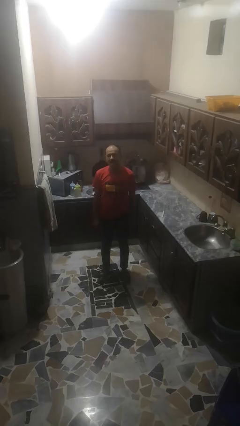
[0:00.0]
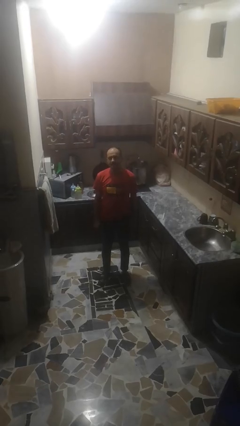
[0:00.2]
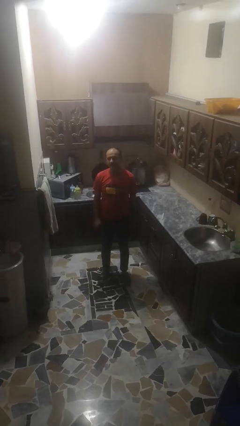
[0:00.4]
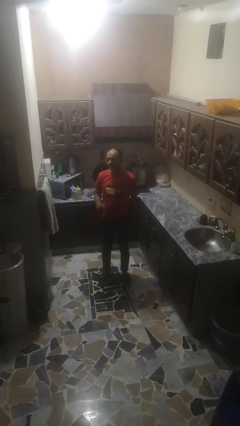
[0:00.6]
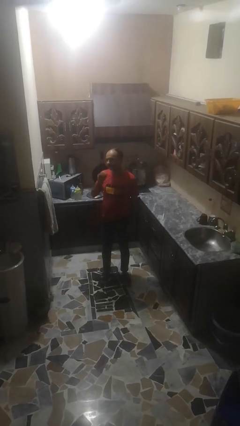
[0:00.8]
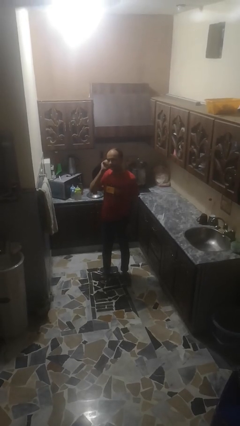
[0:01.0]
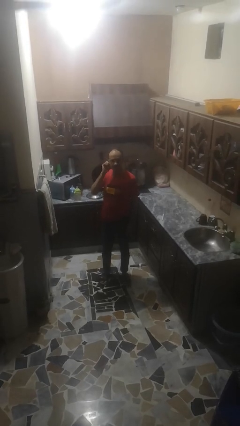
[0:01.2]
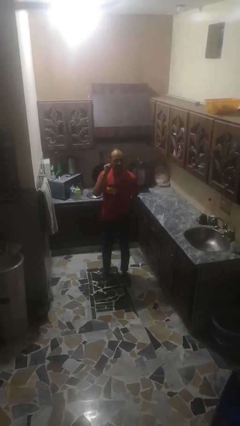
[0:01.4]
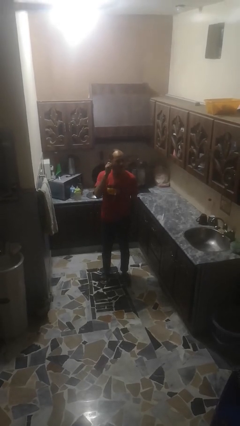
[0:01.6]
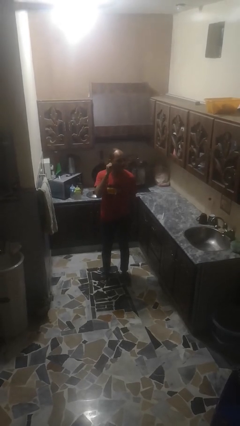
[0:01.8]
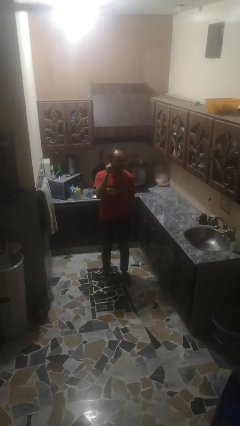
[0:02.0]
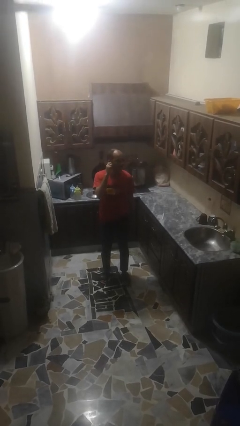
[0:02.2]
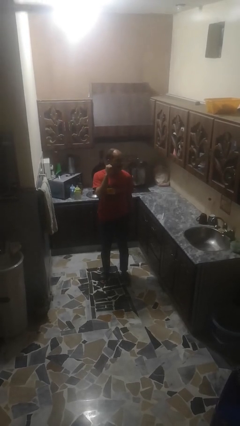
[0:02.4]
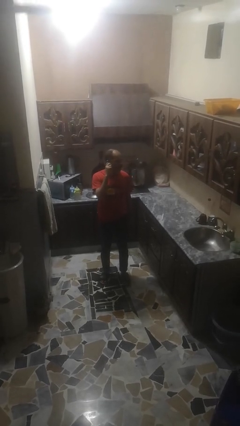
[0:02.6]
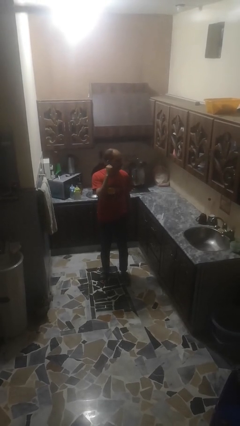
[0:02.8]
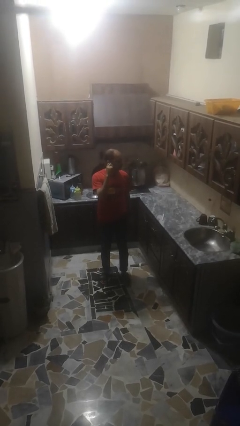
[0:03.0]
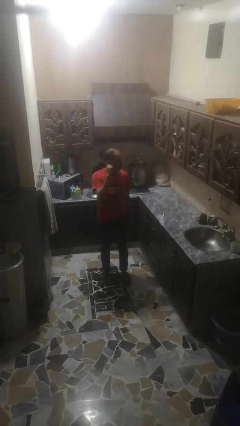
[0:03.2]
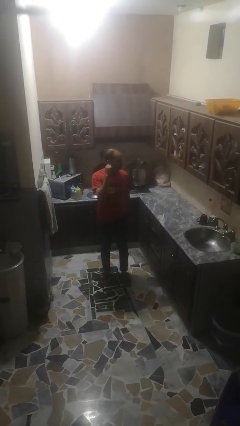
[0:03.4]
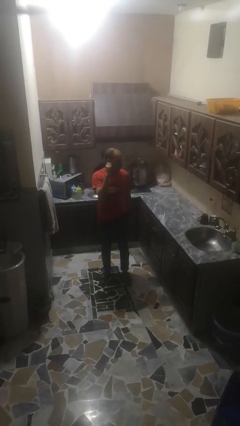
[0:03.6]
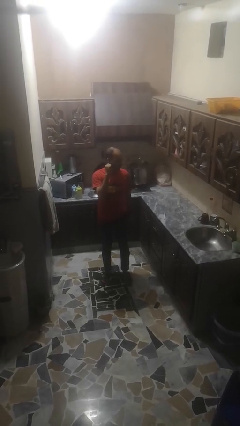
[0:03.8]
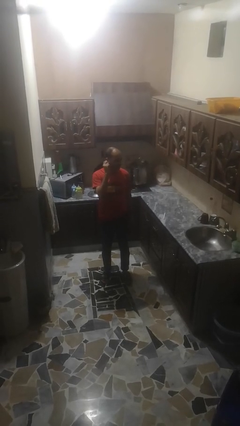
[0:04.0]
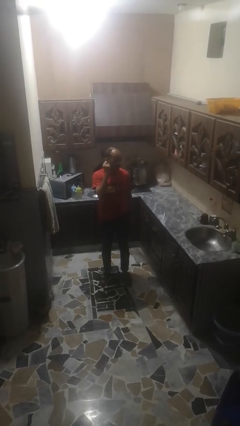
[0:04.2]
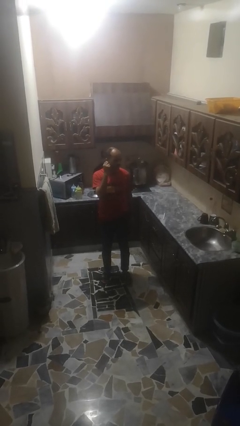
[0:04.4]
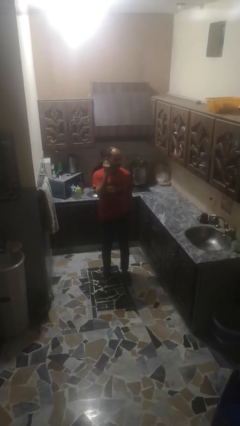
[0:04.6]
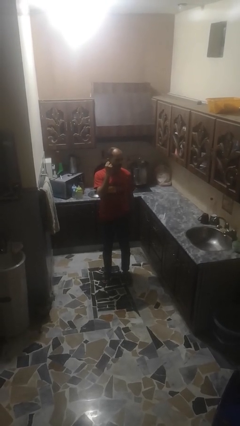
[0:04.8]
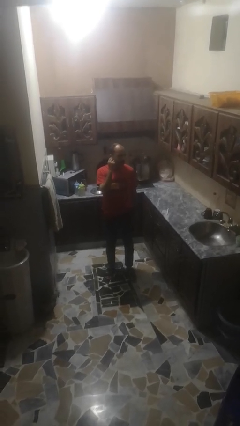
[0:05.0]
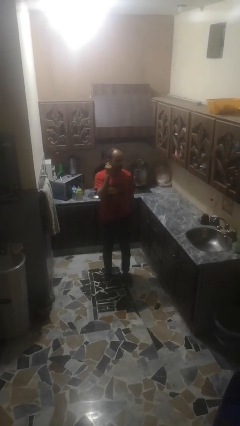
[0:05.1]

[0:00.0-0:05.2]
person touches earlobe

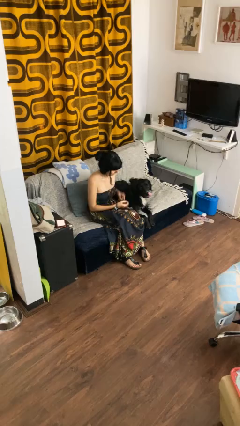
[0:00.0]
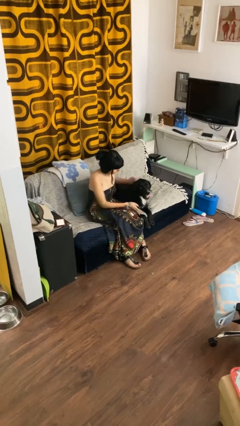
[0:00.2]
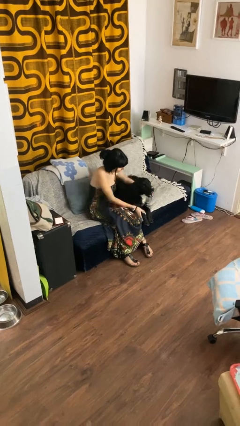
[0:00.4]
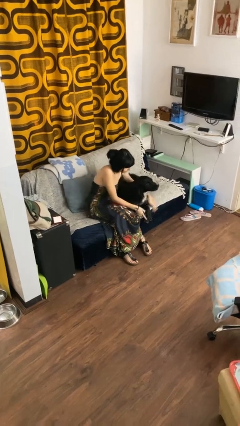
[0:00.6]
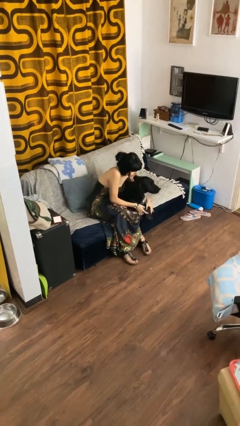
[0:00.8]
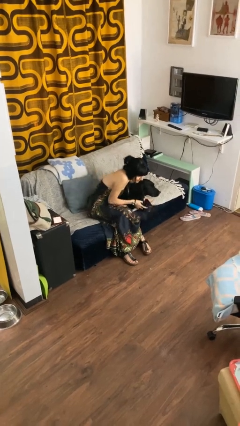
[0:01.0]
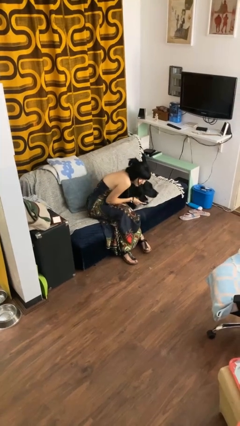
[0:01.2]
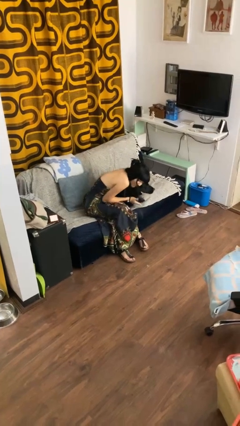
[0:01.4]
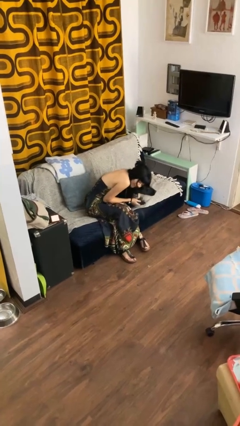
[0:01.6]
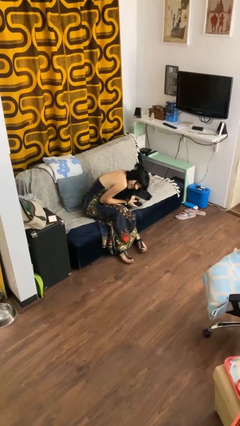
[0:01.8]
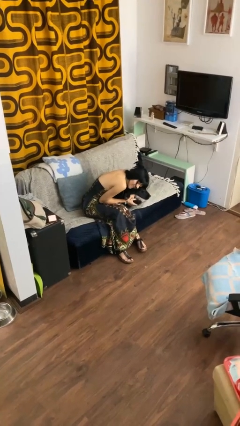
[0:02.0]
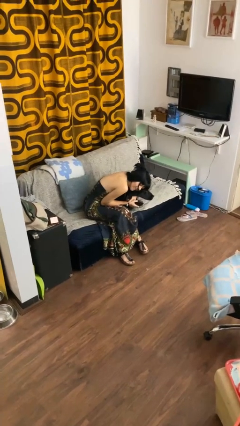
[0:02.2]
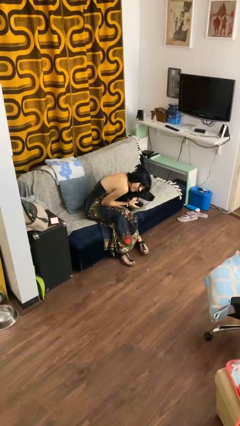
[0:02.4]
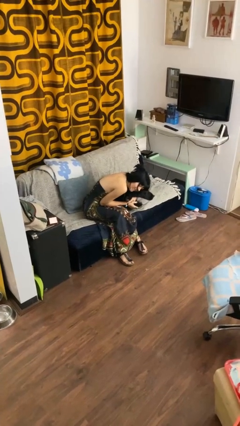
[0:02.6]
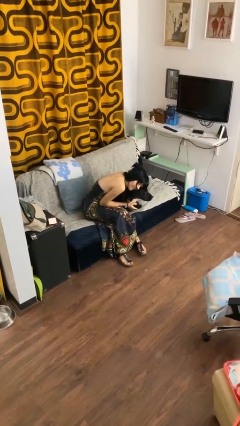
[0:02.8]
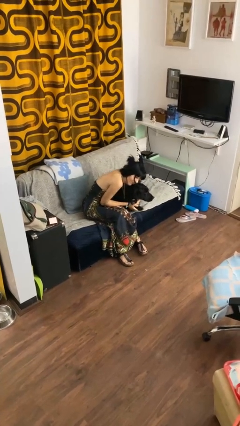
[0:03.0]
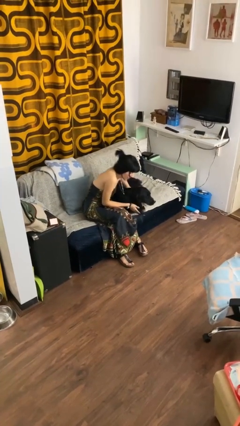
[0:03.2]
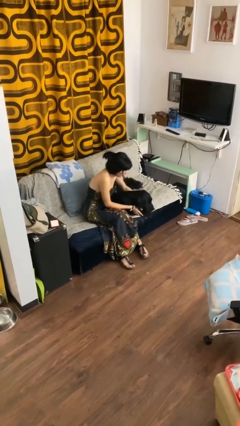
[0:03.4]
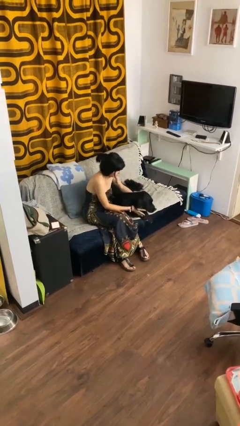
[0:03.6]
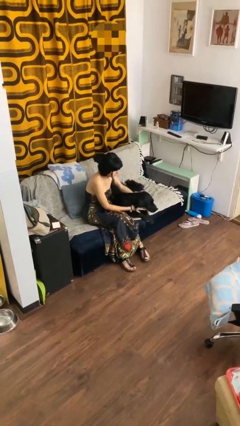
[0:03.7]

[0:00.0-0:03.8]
person hugs dog

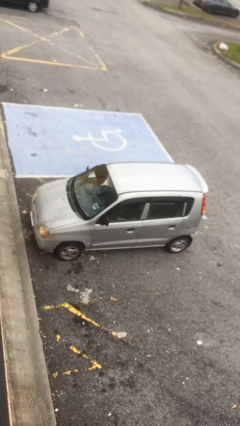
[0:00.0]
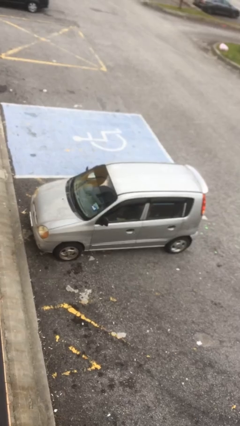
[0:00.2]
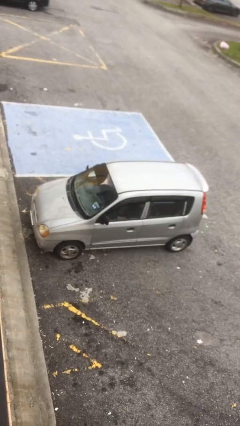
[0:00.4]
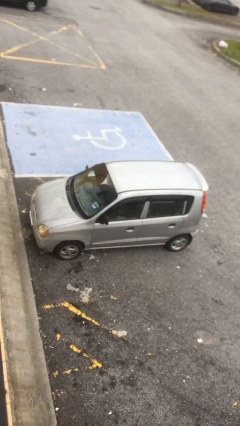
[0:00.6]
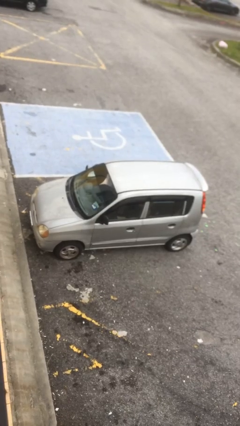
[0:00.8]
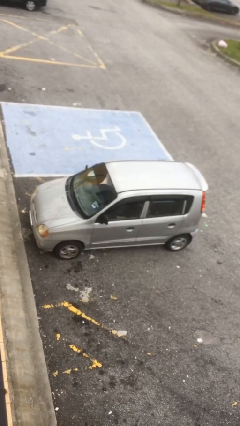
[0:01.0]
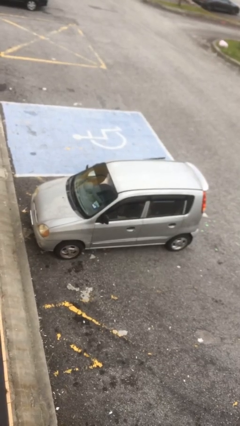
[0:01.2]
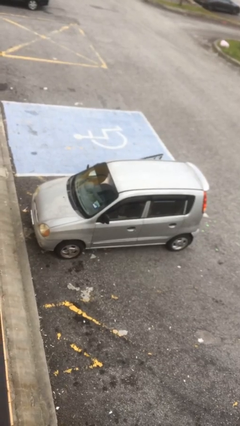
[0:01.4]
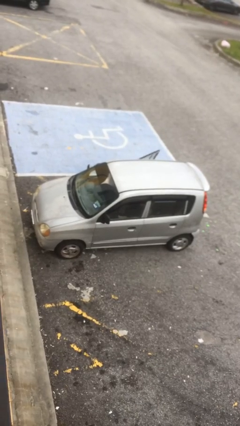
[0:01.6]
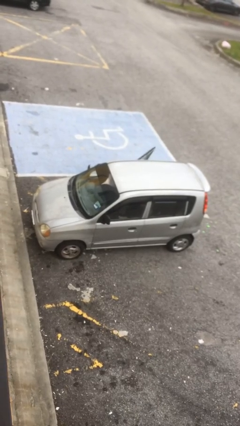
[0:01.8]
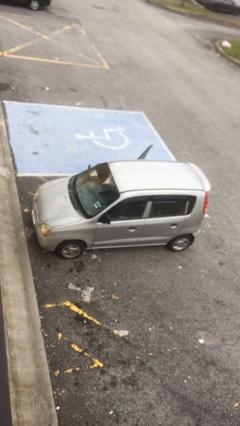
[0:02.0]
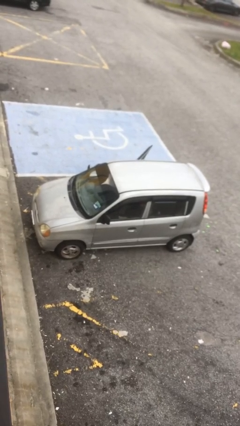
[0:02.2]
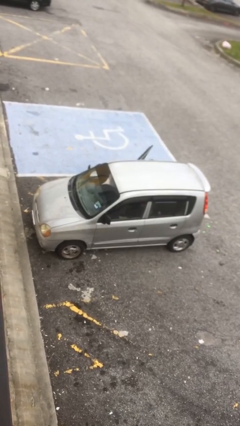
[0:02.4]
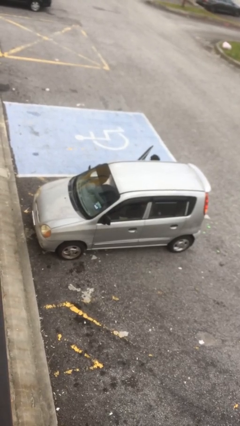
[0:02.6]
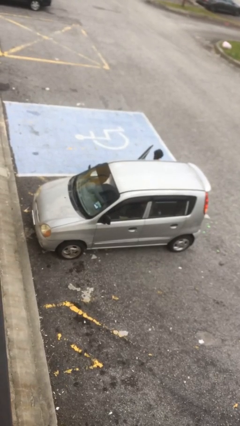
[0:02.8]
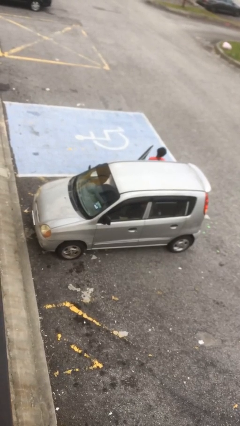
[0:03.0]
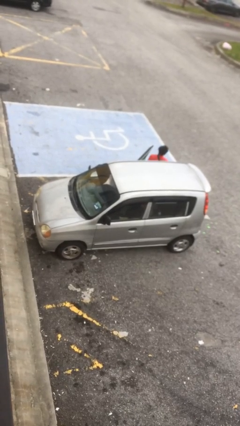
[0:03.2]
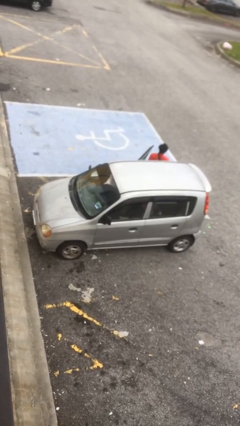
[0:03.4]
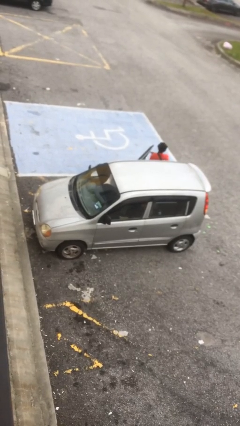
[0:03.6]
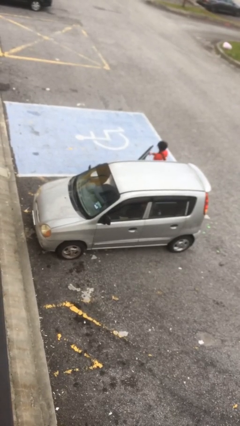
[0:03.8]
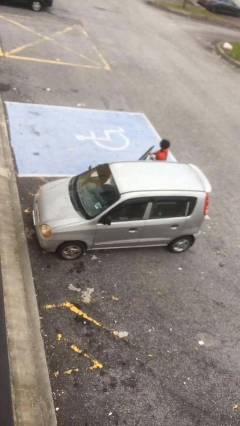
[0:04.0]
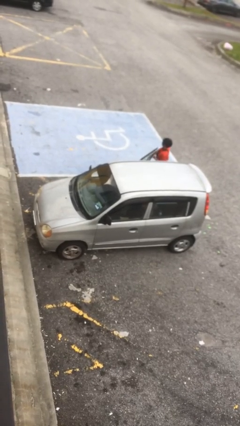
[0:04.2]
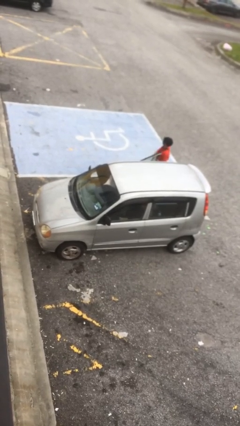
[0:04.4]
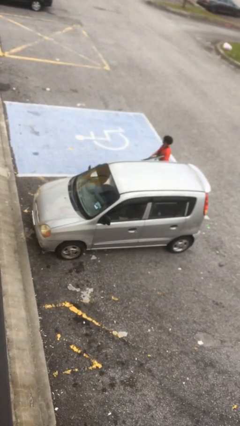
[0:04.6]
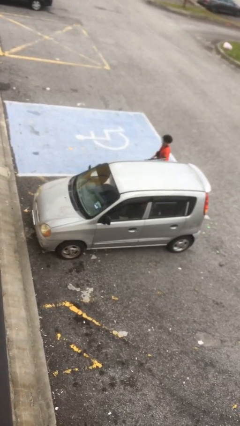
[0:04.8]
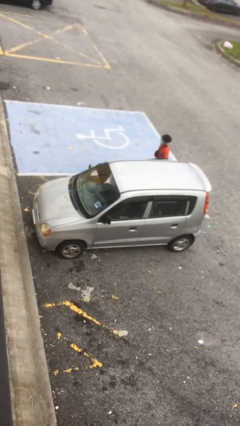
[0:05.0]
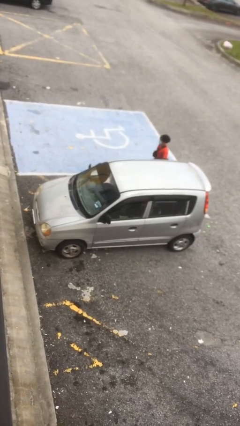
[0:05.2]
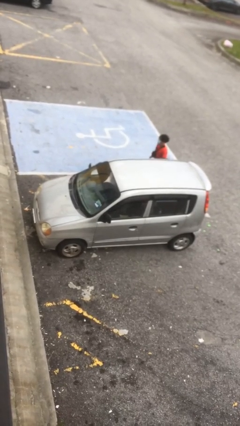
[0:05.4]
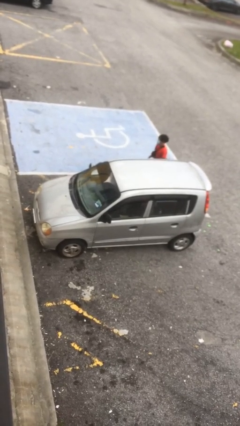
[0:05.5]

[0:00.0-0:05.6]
car drops off person

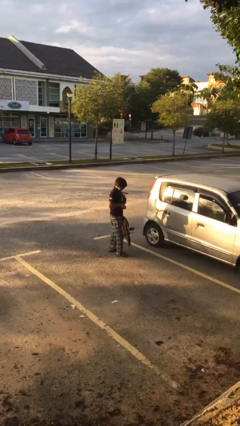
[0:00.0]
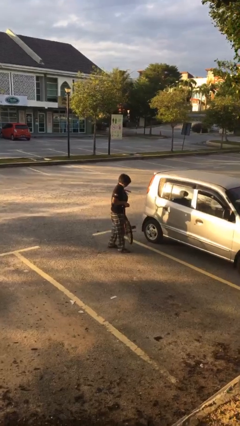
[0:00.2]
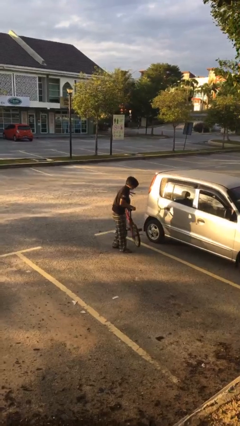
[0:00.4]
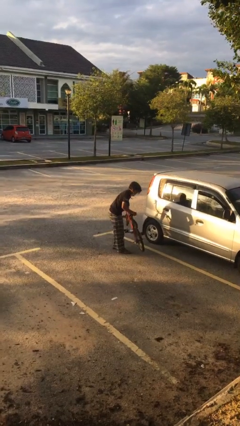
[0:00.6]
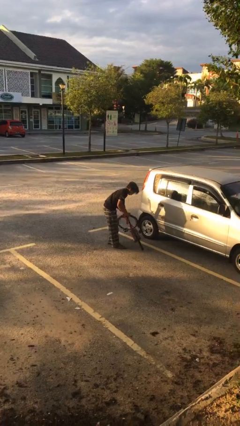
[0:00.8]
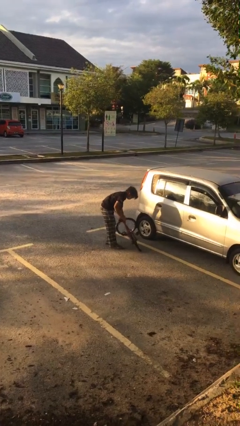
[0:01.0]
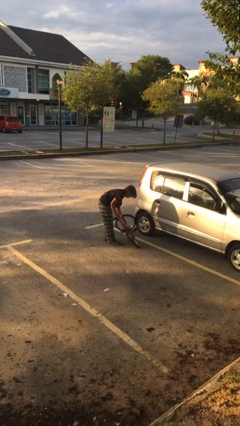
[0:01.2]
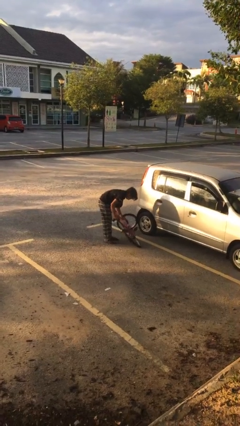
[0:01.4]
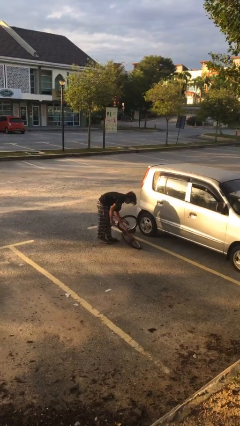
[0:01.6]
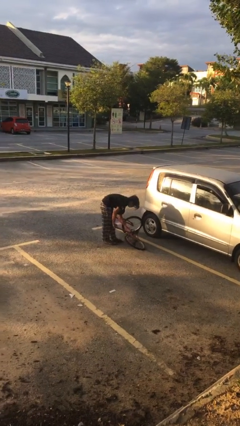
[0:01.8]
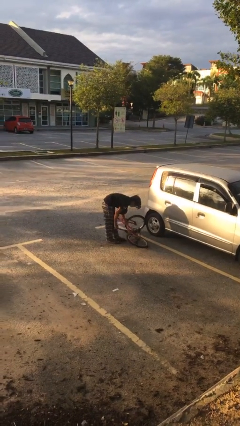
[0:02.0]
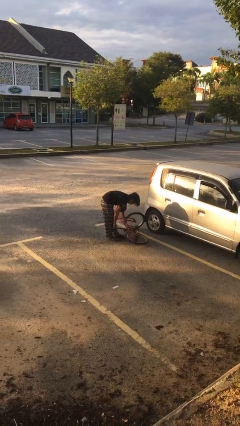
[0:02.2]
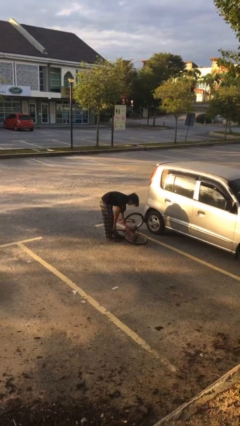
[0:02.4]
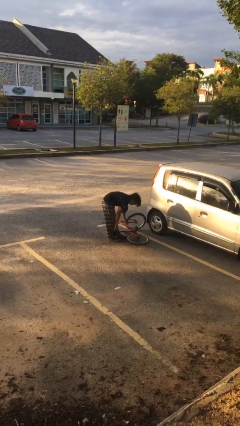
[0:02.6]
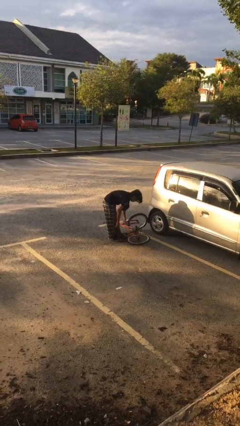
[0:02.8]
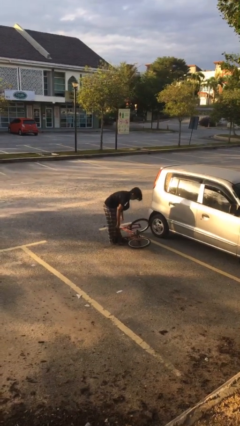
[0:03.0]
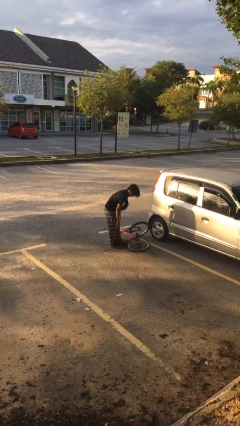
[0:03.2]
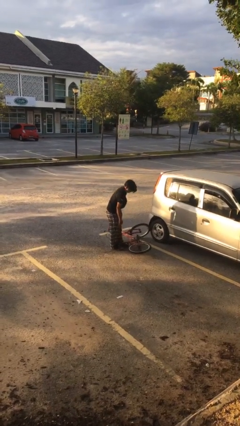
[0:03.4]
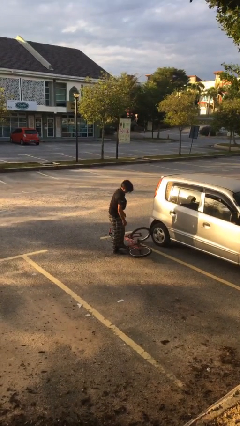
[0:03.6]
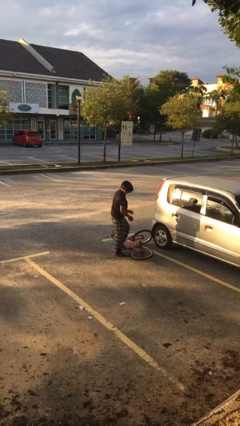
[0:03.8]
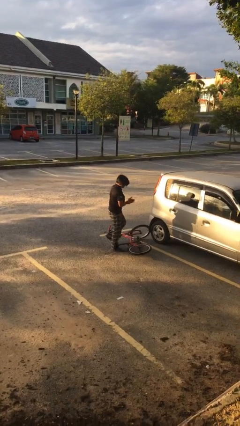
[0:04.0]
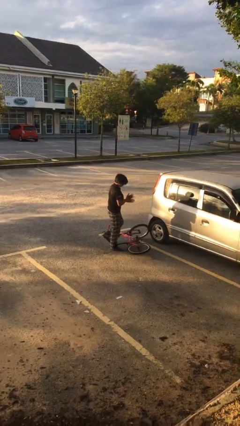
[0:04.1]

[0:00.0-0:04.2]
person puts down object on floor
